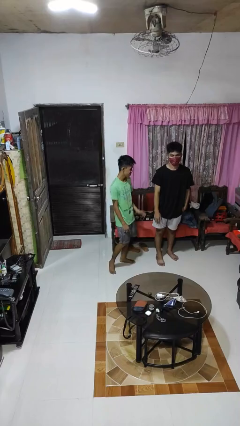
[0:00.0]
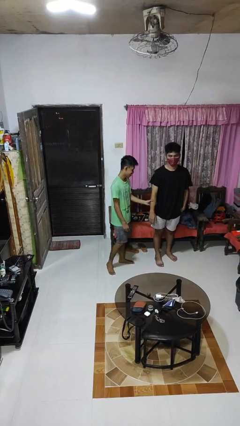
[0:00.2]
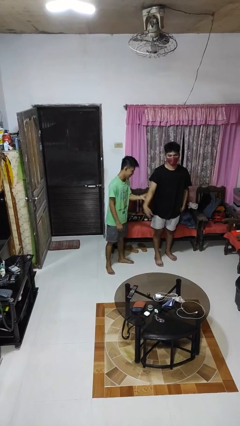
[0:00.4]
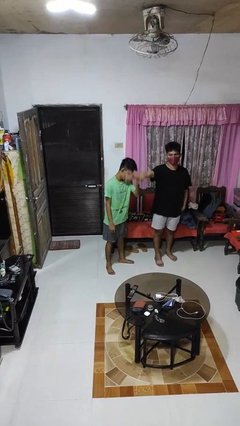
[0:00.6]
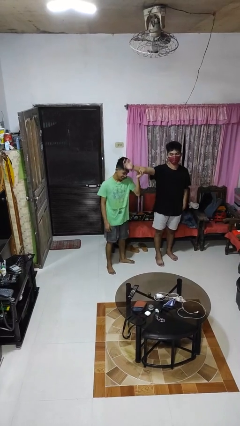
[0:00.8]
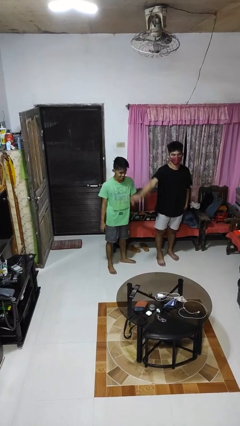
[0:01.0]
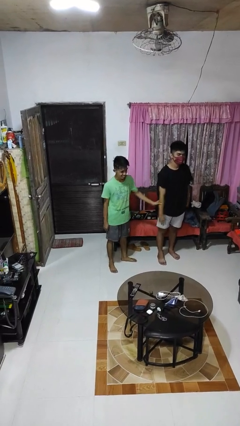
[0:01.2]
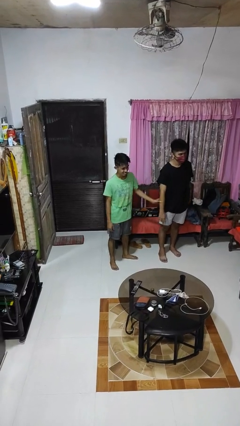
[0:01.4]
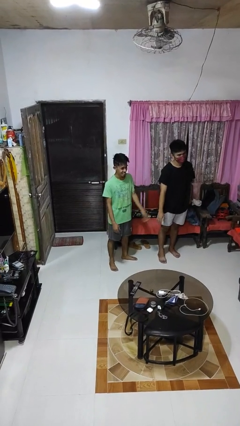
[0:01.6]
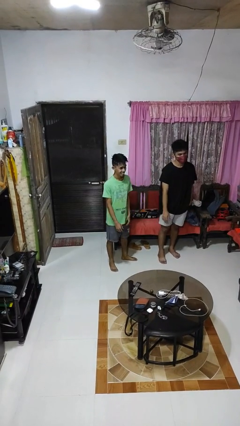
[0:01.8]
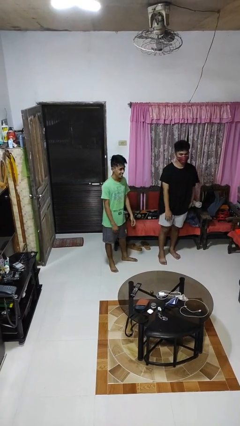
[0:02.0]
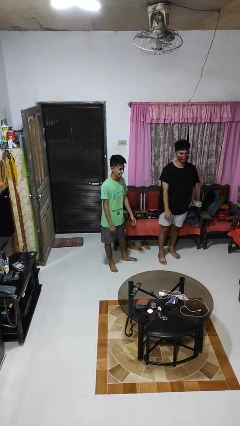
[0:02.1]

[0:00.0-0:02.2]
person grabs person by forearm

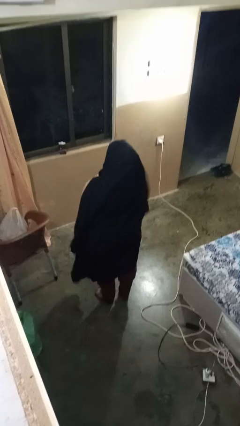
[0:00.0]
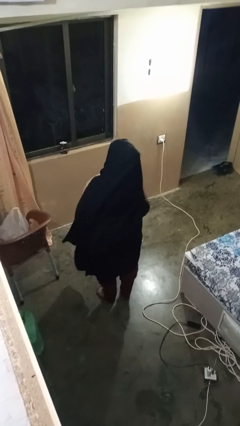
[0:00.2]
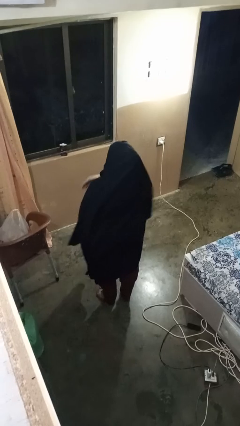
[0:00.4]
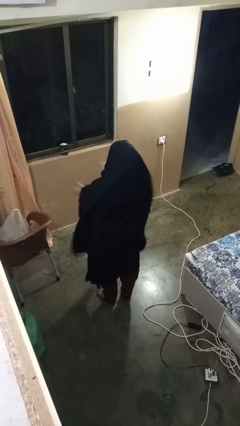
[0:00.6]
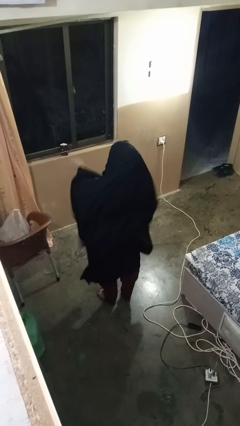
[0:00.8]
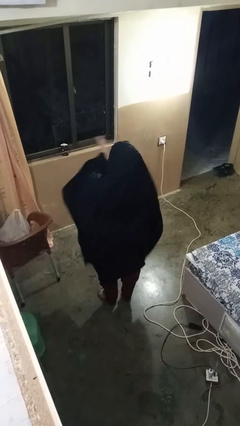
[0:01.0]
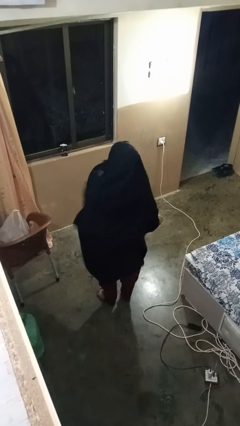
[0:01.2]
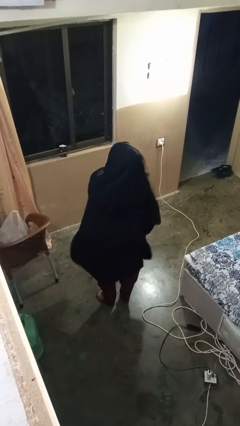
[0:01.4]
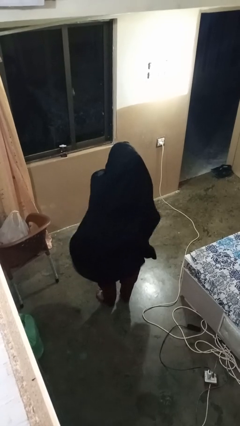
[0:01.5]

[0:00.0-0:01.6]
person gestures swipe right

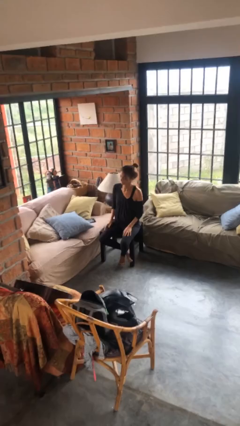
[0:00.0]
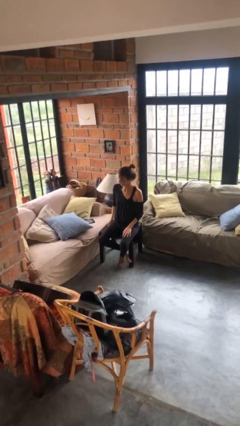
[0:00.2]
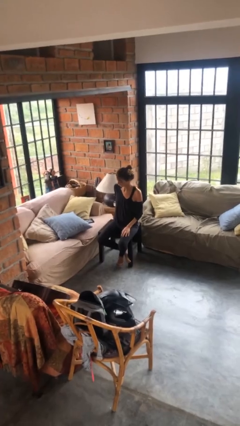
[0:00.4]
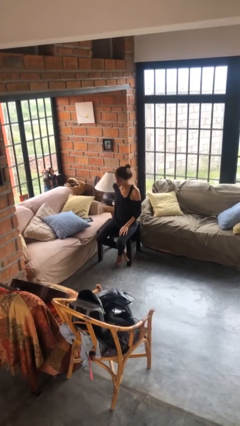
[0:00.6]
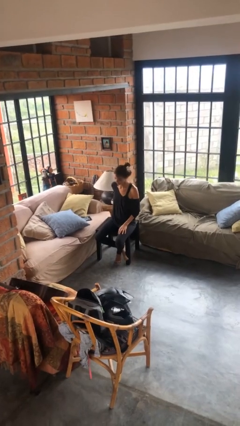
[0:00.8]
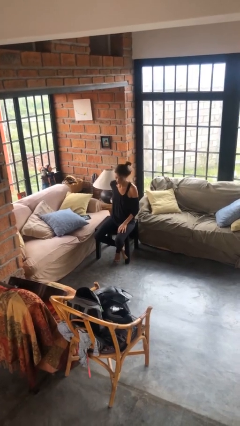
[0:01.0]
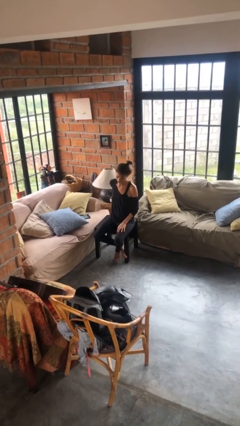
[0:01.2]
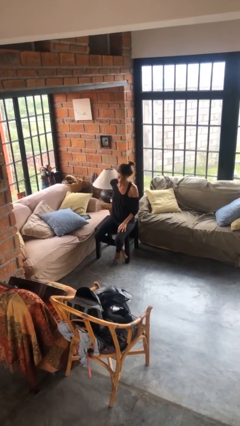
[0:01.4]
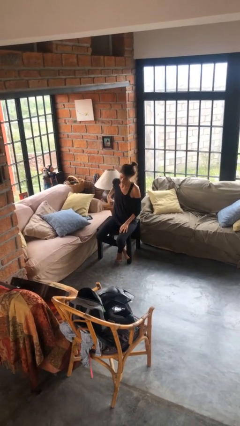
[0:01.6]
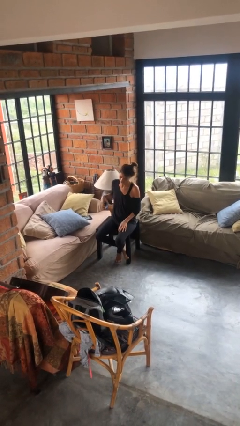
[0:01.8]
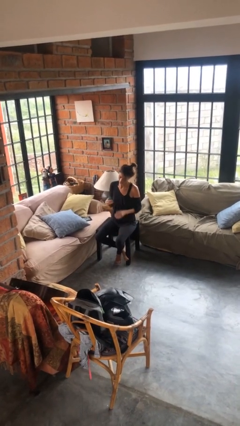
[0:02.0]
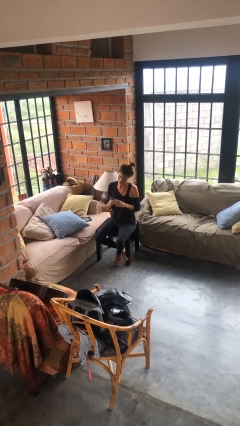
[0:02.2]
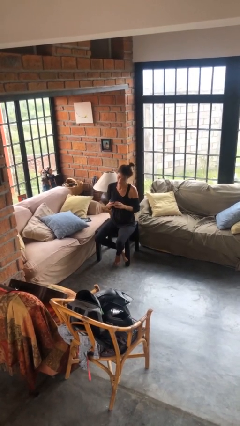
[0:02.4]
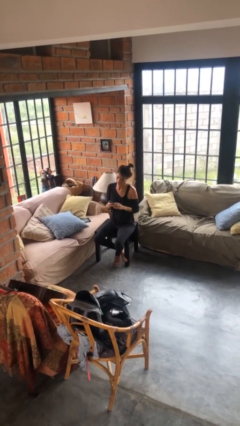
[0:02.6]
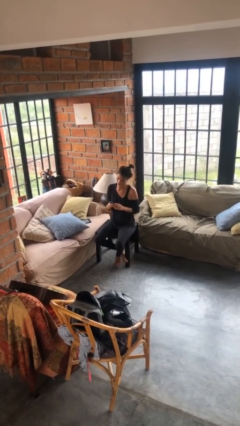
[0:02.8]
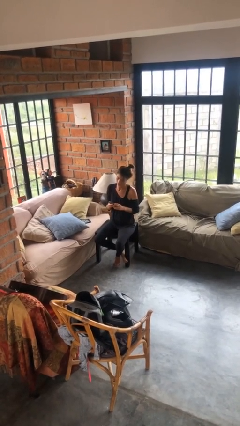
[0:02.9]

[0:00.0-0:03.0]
person takes phone from pocket

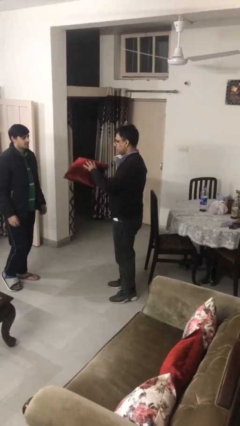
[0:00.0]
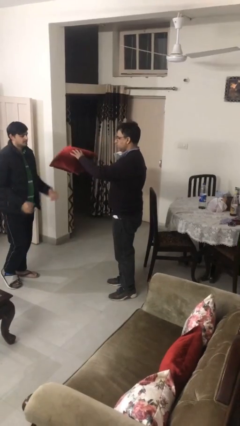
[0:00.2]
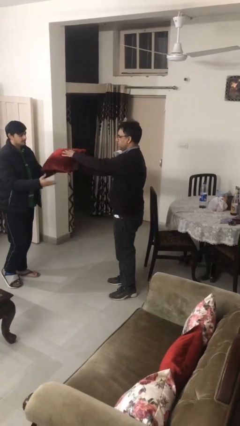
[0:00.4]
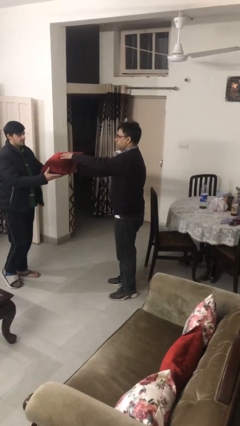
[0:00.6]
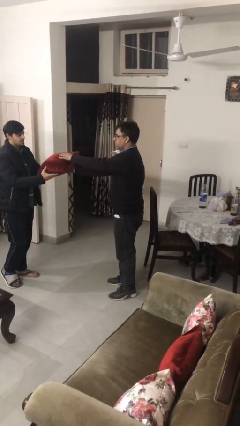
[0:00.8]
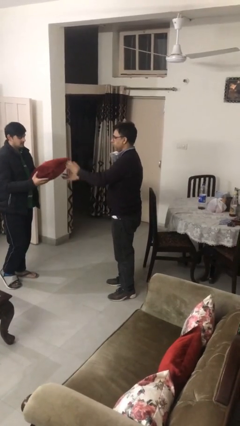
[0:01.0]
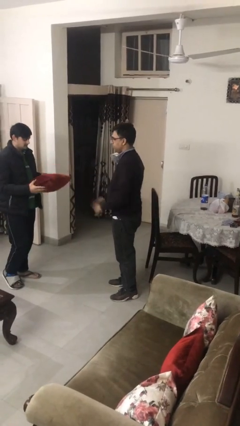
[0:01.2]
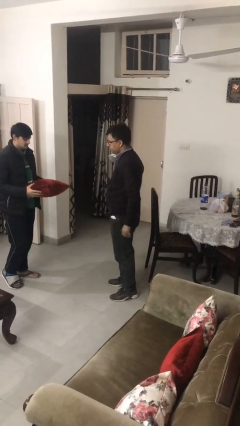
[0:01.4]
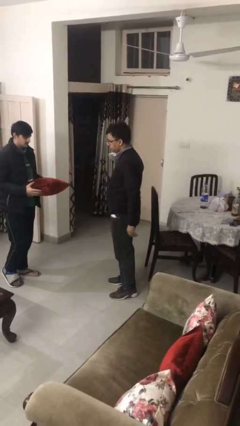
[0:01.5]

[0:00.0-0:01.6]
person transfers object to person

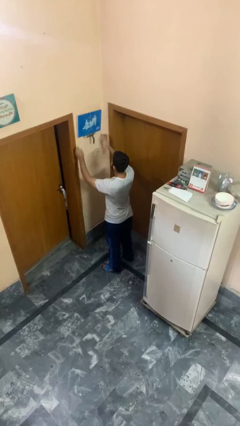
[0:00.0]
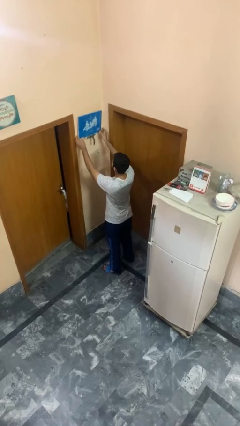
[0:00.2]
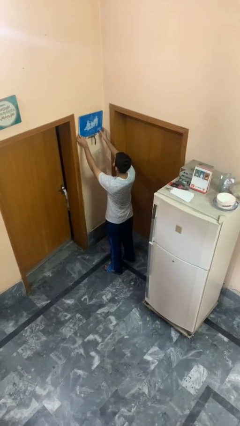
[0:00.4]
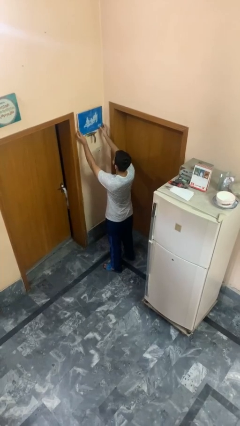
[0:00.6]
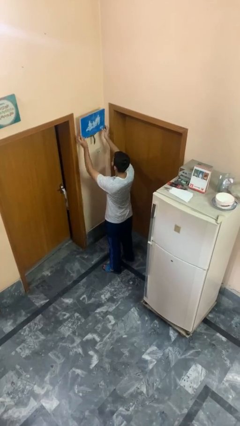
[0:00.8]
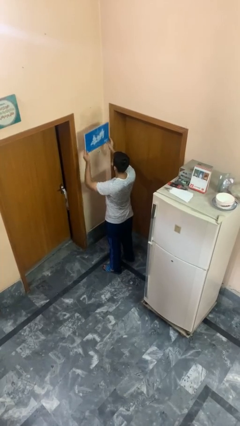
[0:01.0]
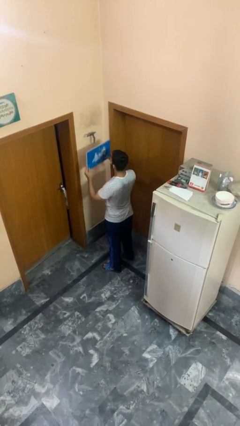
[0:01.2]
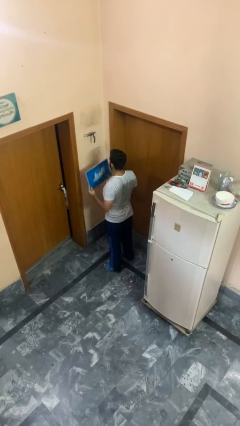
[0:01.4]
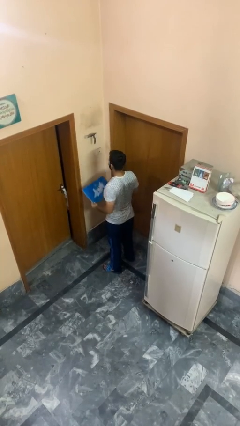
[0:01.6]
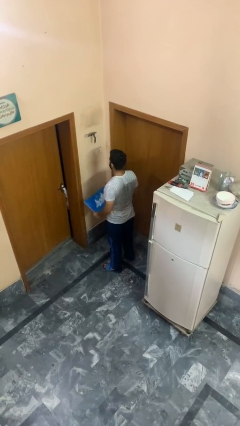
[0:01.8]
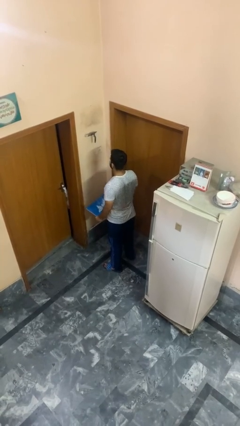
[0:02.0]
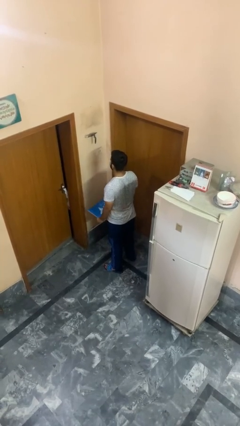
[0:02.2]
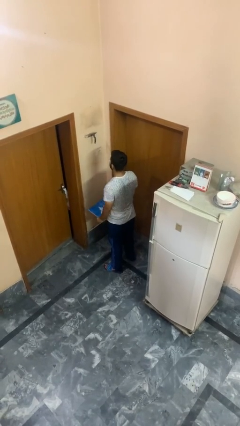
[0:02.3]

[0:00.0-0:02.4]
person takes down picture frame

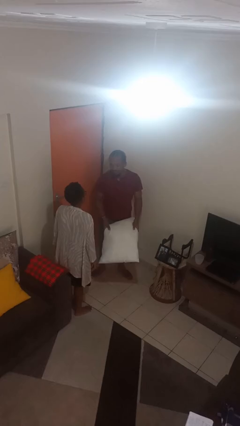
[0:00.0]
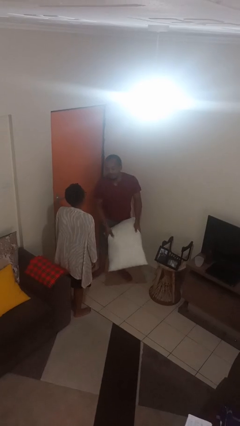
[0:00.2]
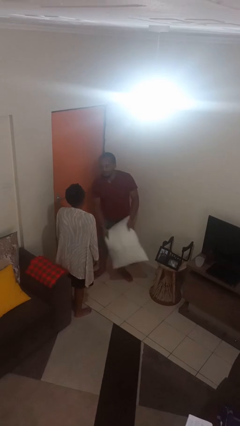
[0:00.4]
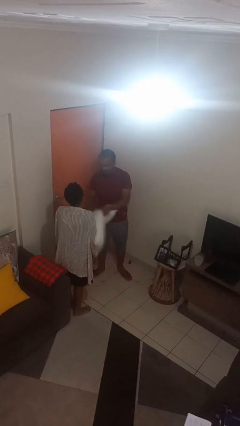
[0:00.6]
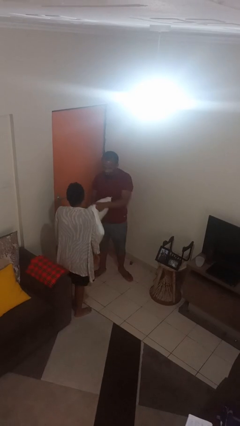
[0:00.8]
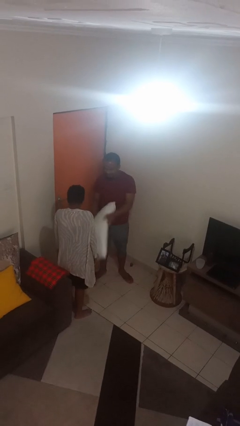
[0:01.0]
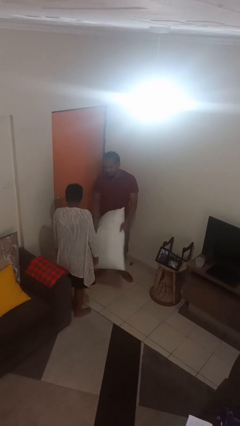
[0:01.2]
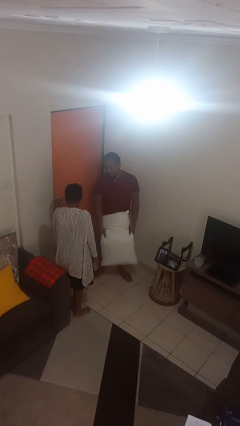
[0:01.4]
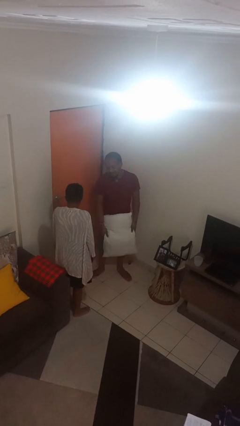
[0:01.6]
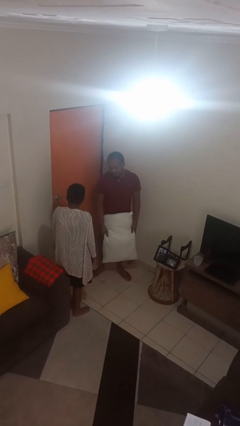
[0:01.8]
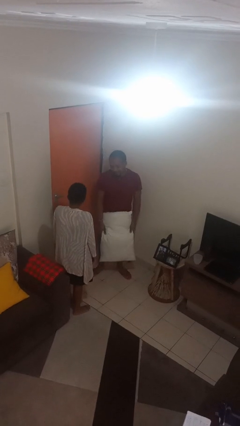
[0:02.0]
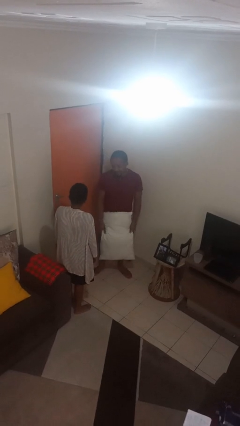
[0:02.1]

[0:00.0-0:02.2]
person hits person with pillow

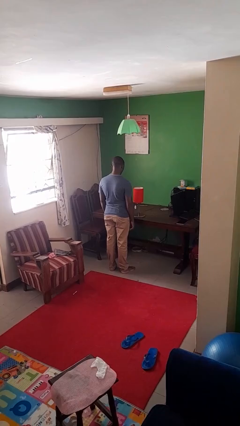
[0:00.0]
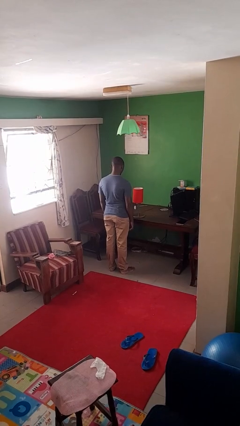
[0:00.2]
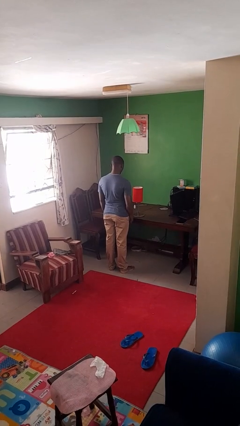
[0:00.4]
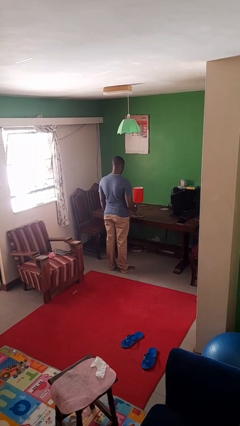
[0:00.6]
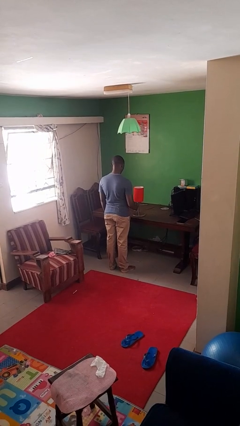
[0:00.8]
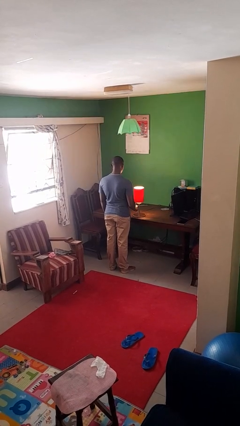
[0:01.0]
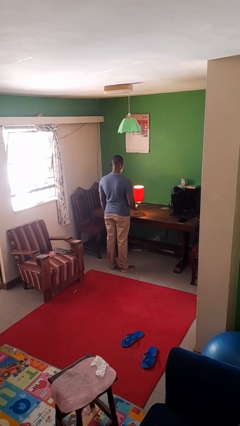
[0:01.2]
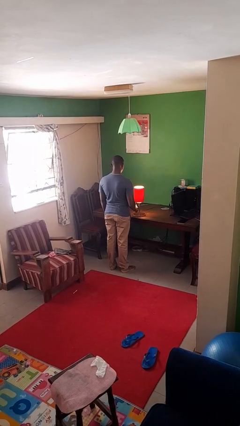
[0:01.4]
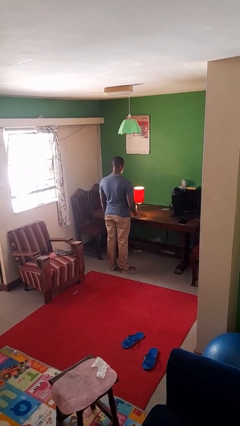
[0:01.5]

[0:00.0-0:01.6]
person turns on lamp

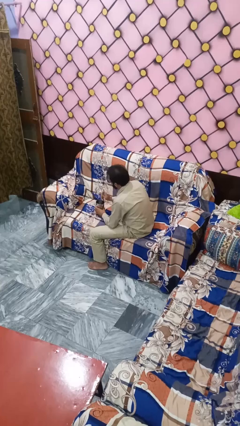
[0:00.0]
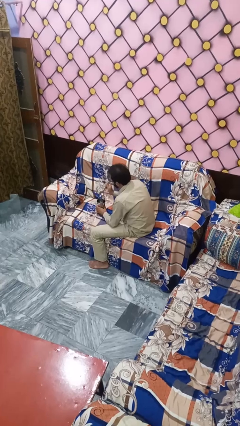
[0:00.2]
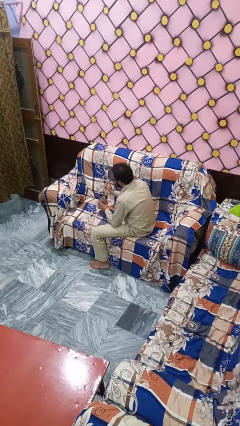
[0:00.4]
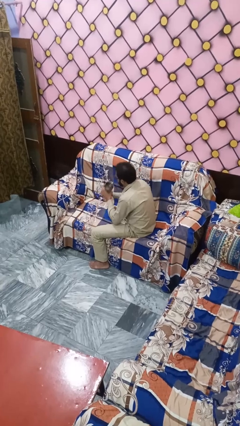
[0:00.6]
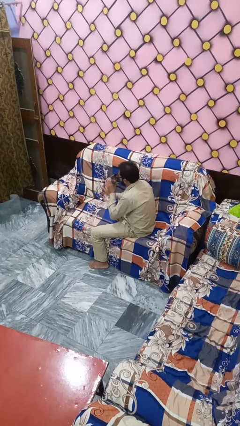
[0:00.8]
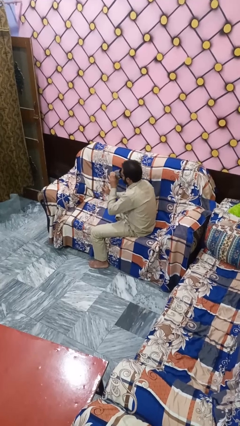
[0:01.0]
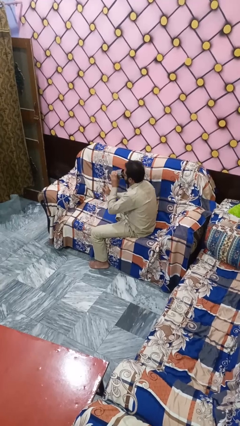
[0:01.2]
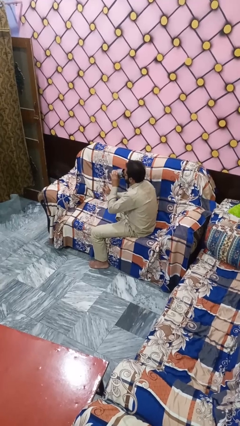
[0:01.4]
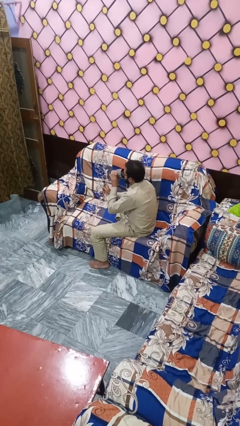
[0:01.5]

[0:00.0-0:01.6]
person drinks from mug

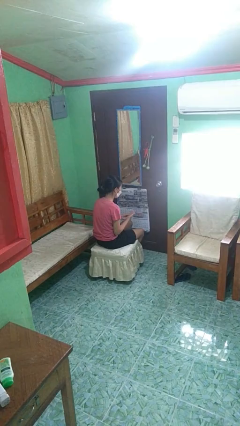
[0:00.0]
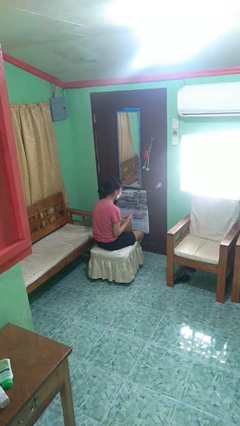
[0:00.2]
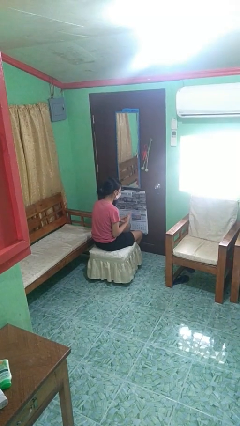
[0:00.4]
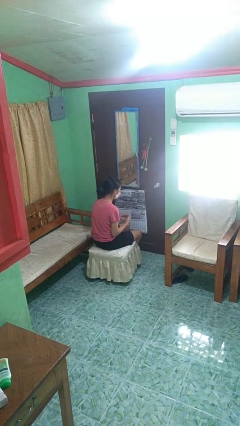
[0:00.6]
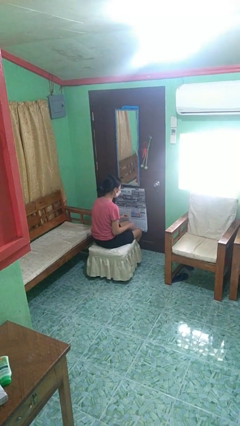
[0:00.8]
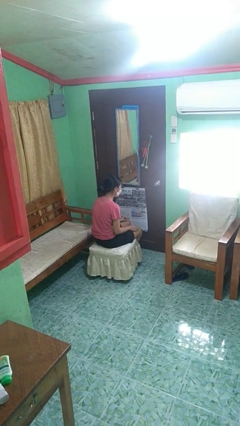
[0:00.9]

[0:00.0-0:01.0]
person takes off ring
